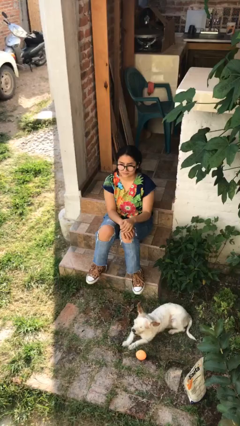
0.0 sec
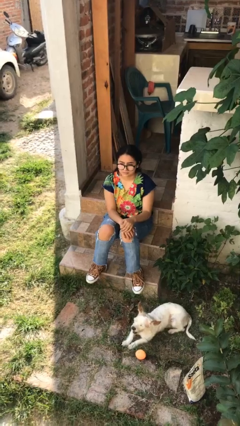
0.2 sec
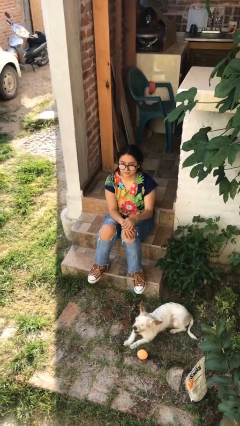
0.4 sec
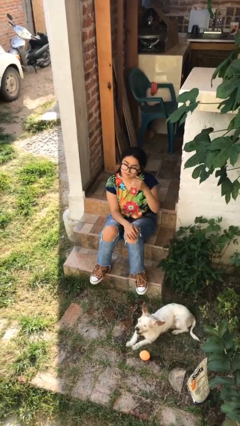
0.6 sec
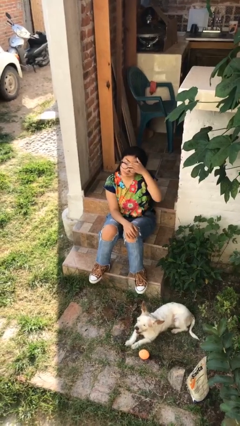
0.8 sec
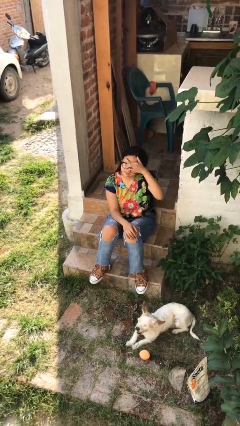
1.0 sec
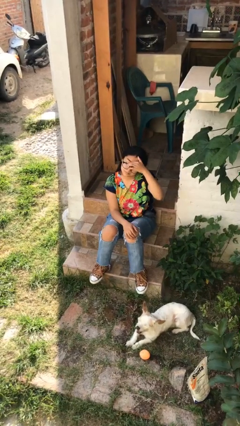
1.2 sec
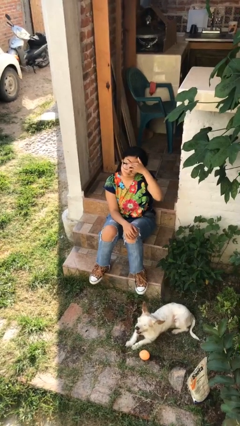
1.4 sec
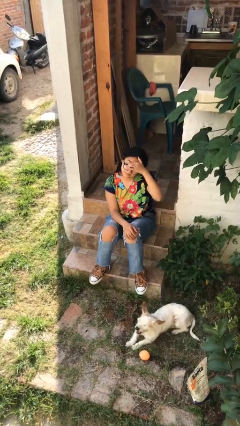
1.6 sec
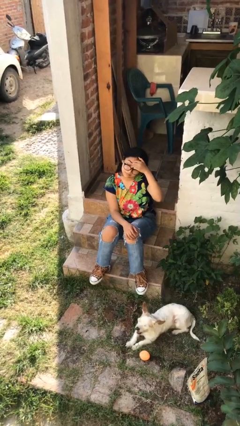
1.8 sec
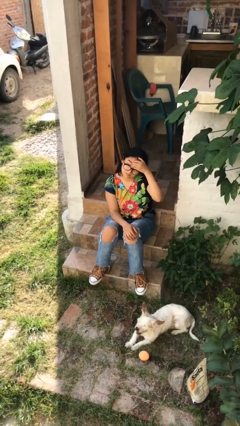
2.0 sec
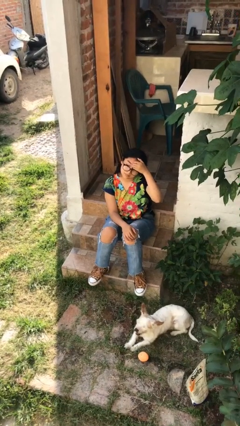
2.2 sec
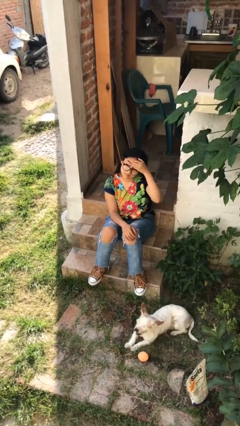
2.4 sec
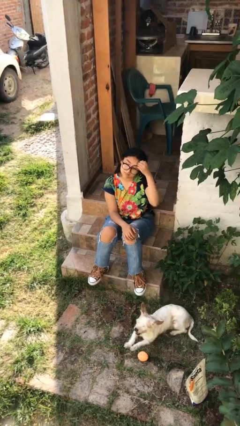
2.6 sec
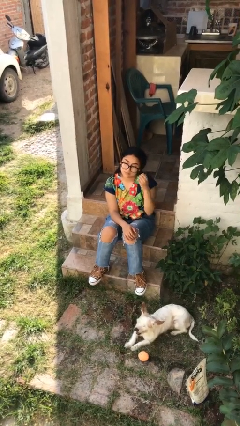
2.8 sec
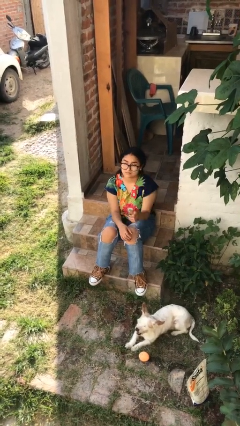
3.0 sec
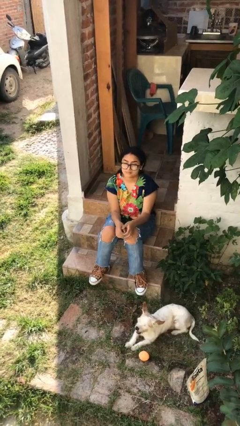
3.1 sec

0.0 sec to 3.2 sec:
person scratches face

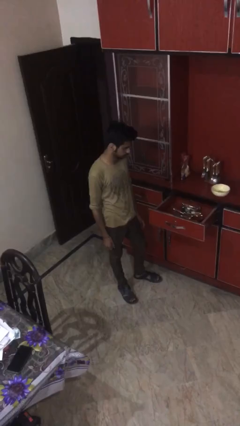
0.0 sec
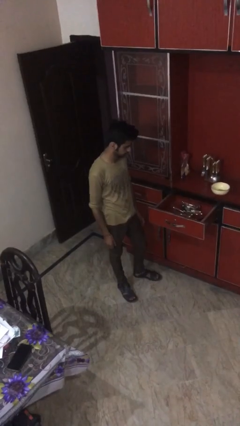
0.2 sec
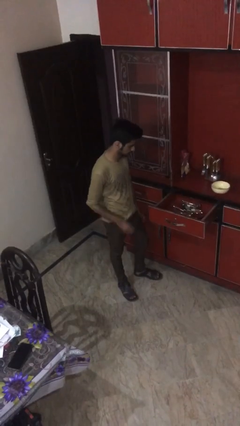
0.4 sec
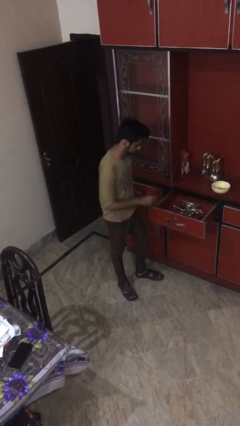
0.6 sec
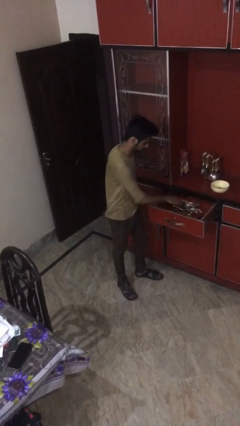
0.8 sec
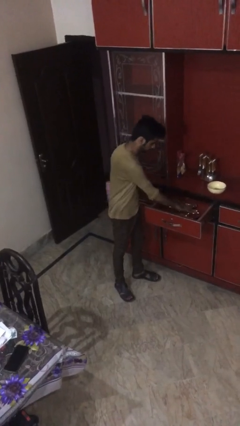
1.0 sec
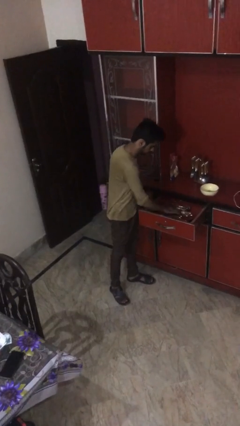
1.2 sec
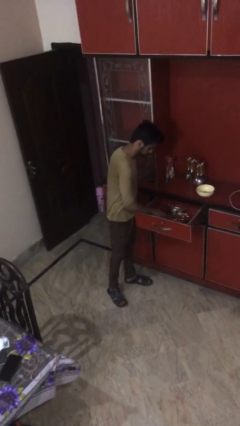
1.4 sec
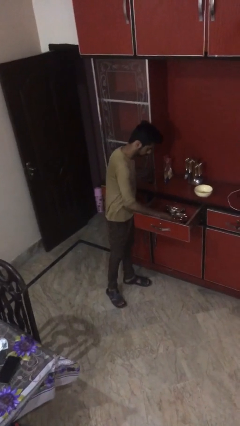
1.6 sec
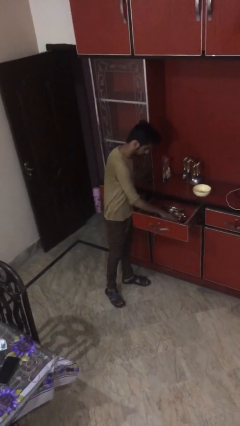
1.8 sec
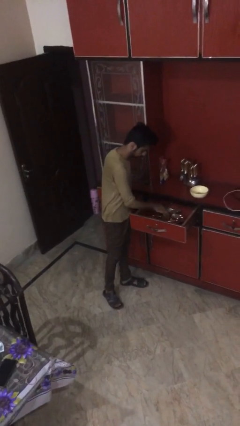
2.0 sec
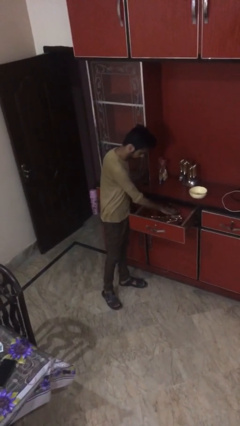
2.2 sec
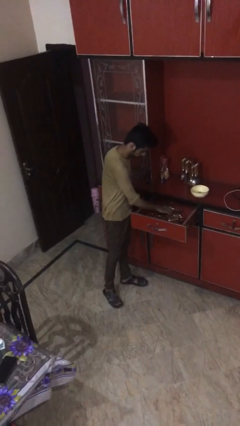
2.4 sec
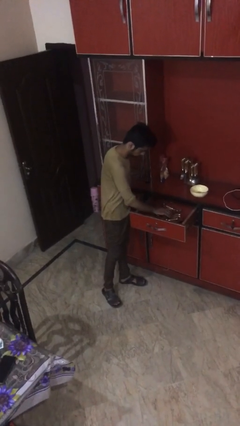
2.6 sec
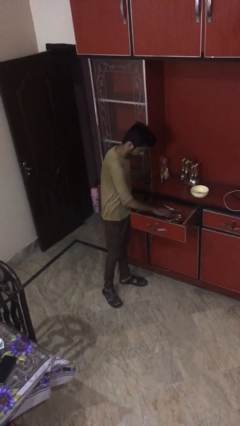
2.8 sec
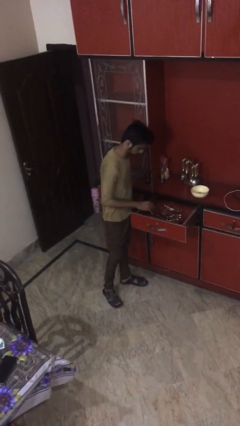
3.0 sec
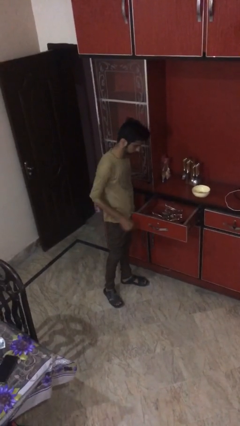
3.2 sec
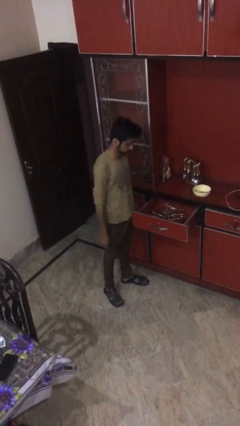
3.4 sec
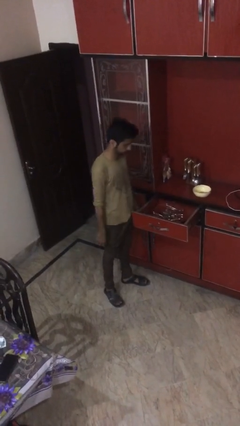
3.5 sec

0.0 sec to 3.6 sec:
person searches in kitchen drawer

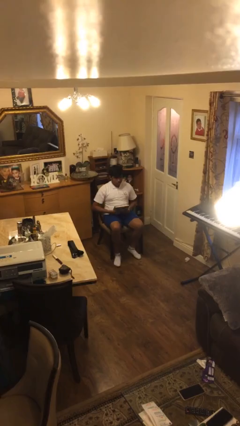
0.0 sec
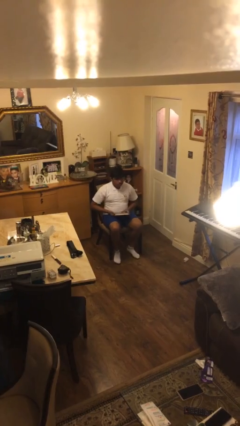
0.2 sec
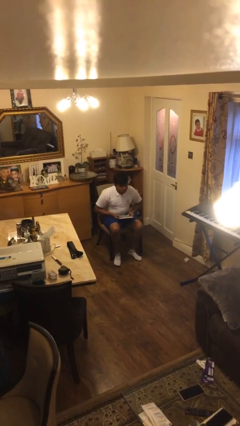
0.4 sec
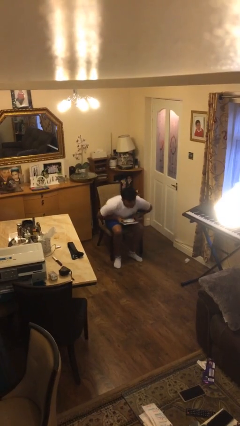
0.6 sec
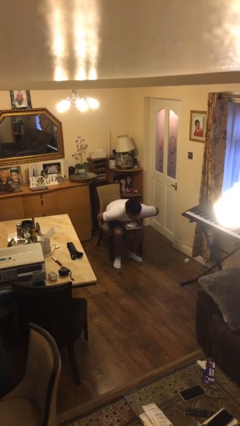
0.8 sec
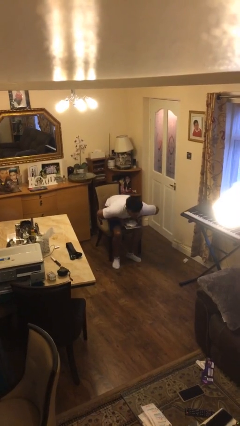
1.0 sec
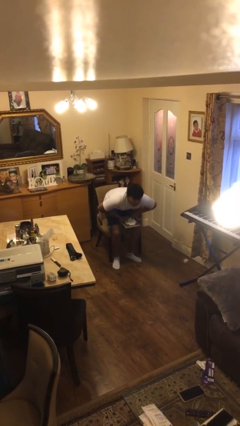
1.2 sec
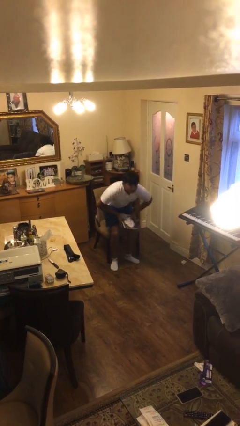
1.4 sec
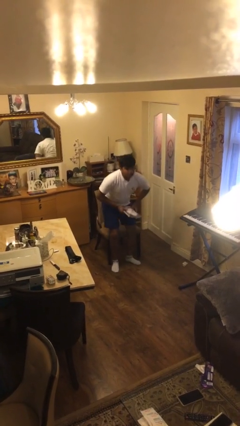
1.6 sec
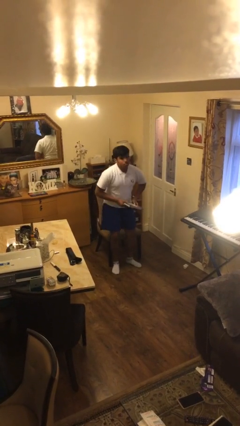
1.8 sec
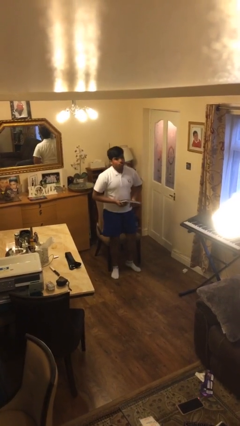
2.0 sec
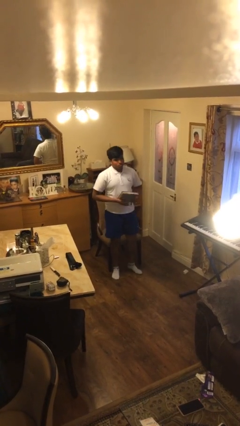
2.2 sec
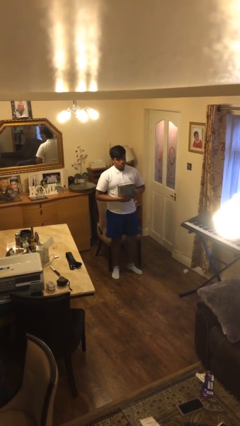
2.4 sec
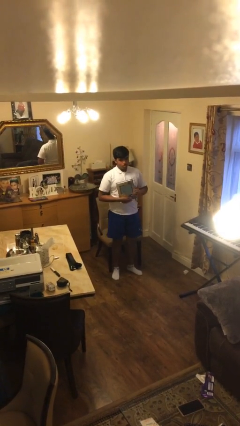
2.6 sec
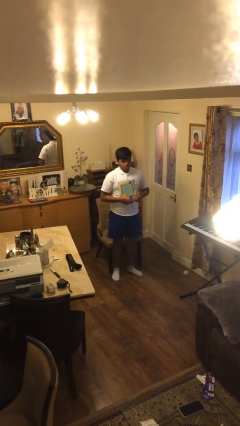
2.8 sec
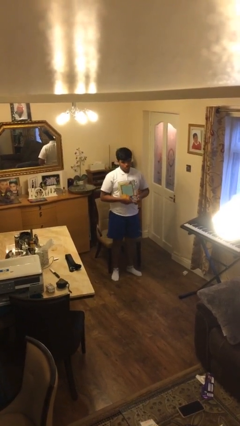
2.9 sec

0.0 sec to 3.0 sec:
person stands up

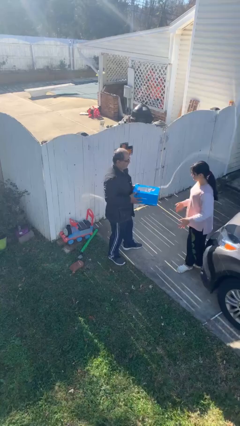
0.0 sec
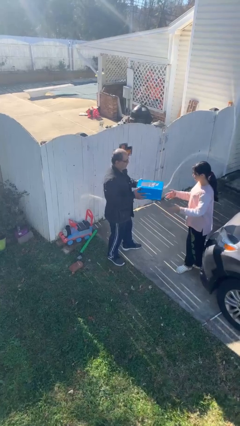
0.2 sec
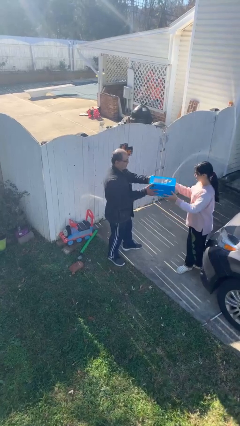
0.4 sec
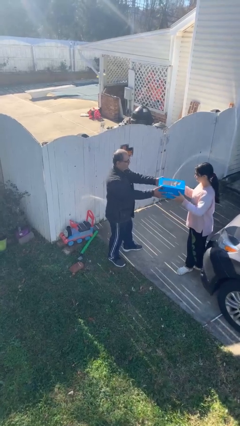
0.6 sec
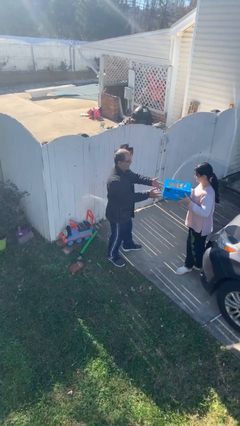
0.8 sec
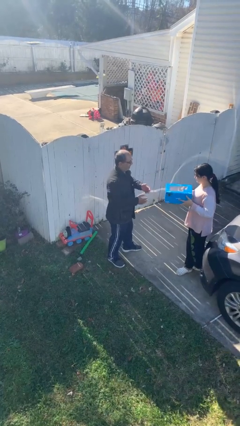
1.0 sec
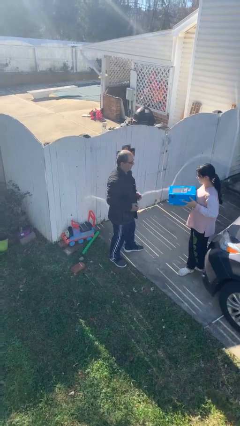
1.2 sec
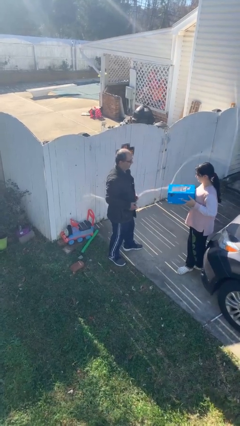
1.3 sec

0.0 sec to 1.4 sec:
person transfers object to person

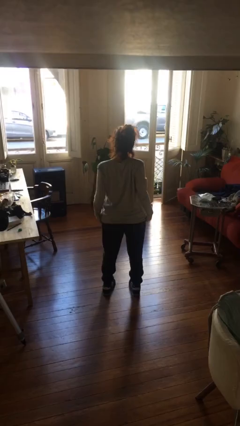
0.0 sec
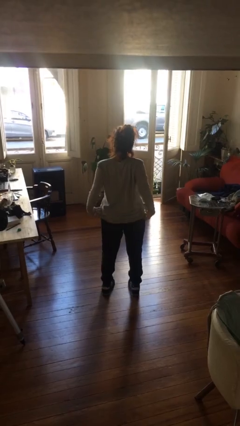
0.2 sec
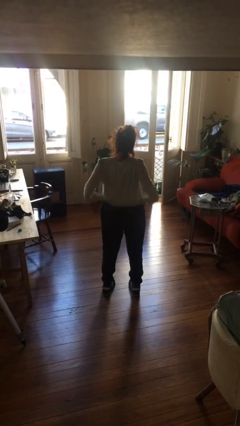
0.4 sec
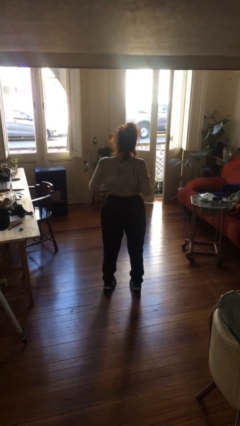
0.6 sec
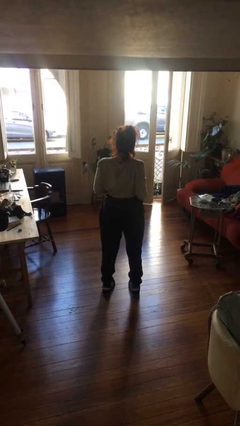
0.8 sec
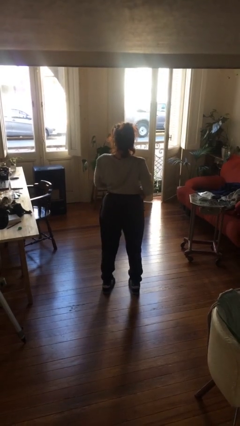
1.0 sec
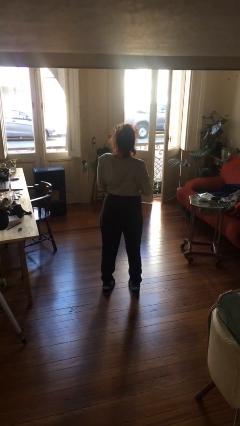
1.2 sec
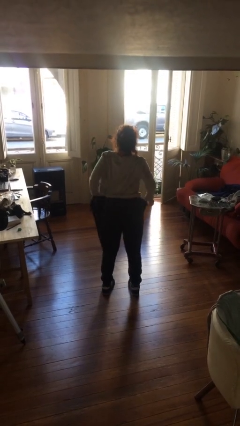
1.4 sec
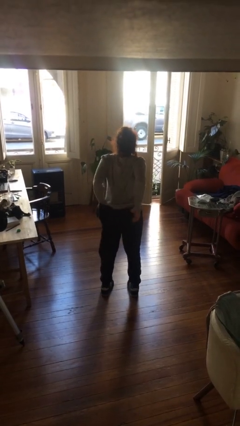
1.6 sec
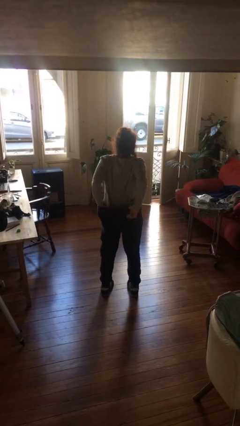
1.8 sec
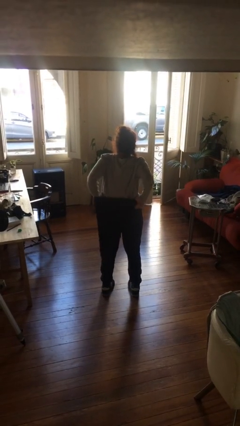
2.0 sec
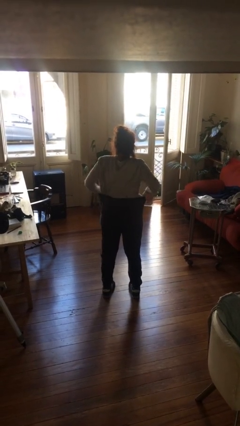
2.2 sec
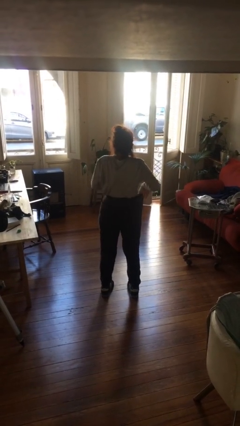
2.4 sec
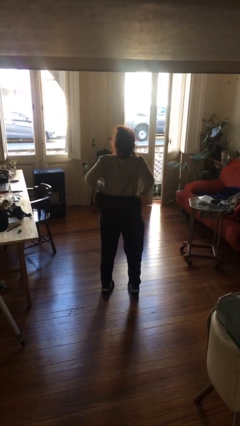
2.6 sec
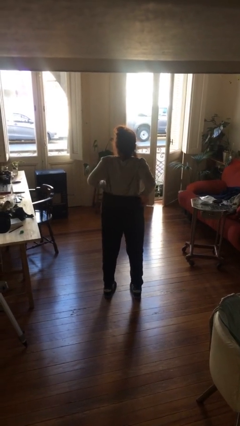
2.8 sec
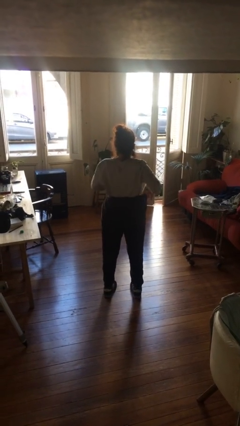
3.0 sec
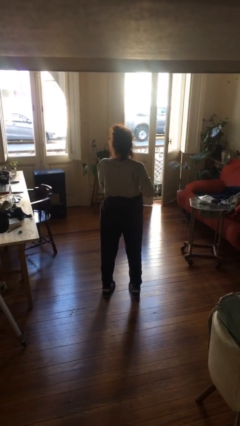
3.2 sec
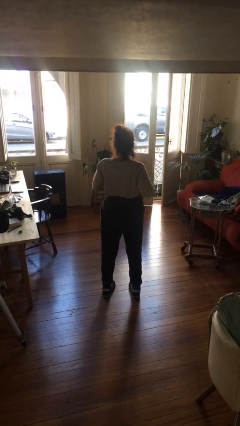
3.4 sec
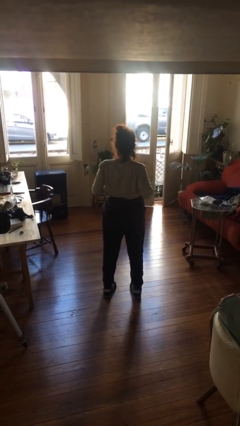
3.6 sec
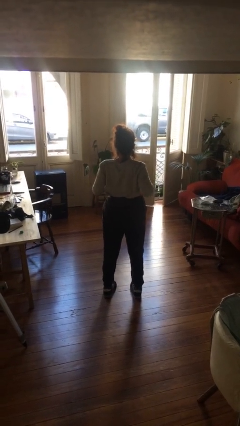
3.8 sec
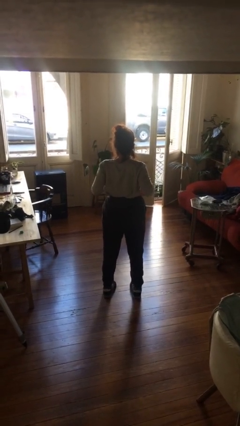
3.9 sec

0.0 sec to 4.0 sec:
person tucks in shirt

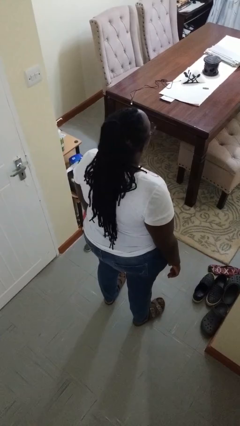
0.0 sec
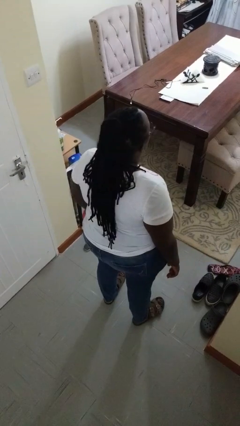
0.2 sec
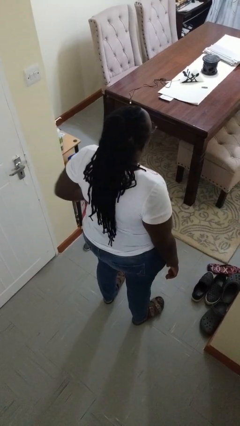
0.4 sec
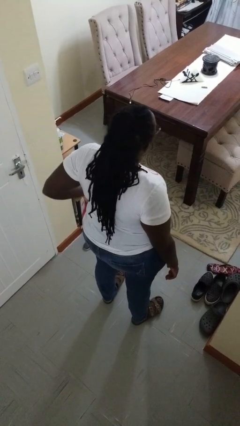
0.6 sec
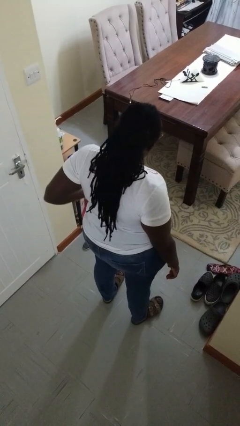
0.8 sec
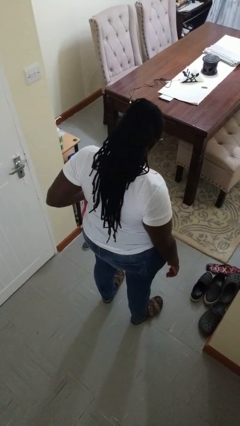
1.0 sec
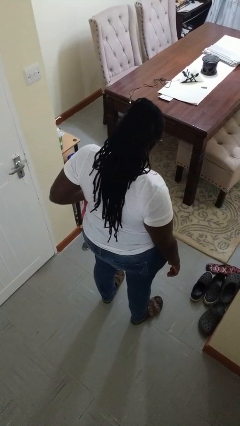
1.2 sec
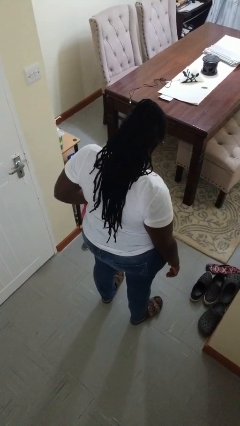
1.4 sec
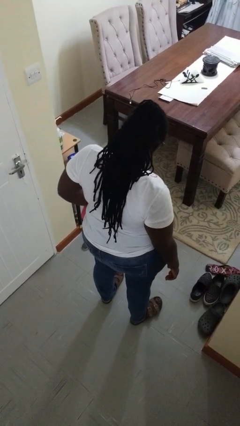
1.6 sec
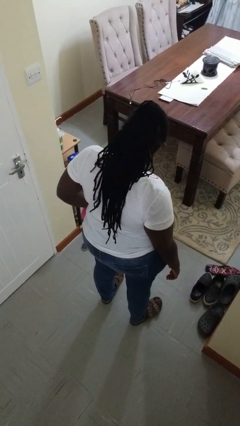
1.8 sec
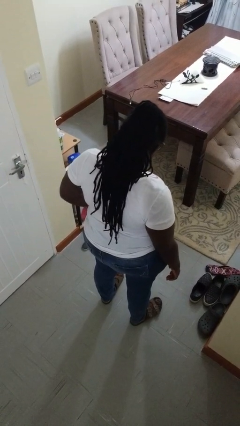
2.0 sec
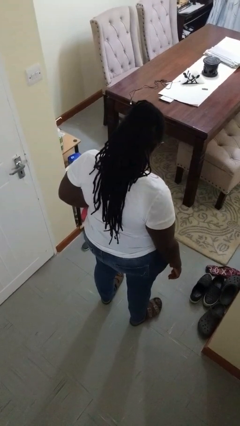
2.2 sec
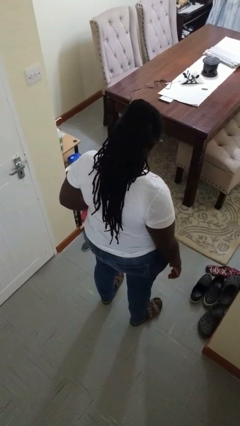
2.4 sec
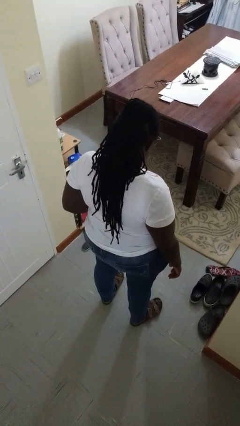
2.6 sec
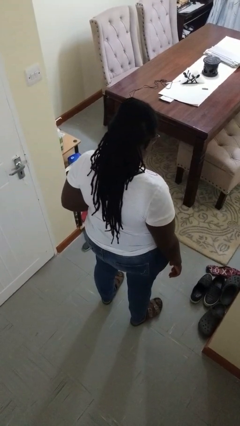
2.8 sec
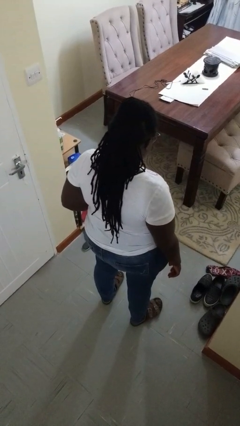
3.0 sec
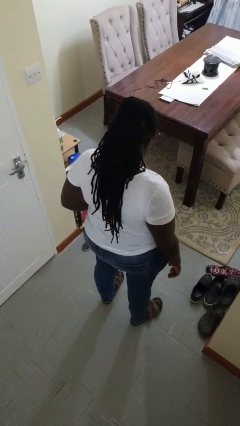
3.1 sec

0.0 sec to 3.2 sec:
person puts hands in back pockets
